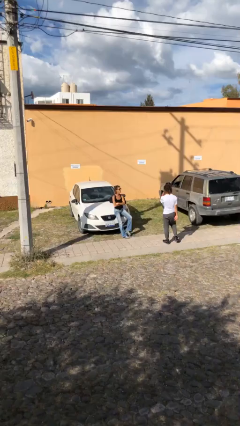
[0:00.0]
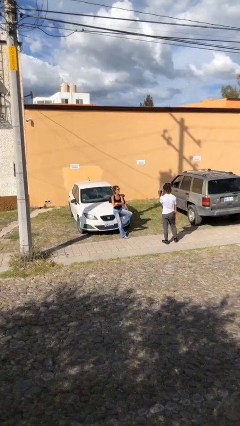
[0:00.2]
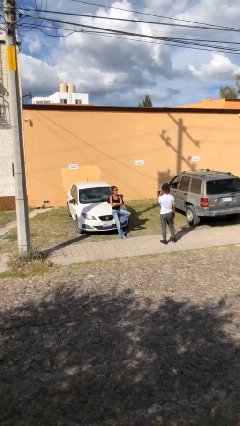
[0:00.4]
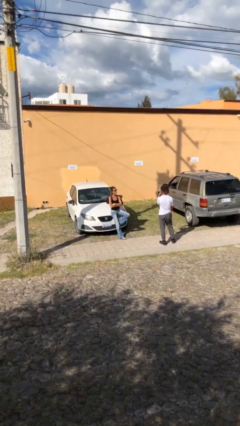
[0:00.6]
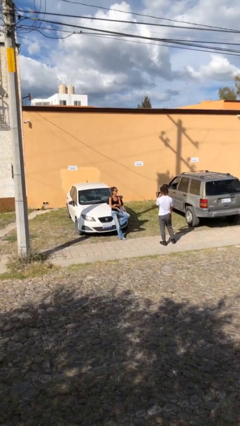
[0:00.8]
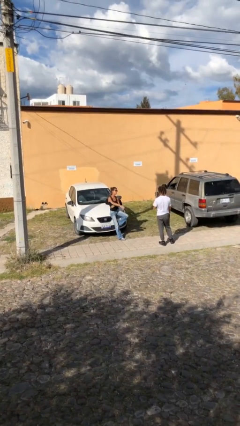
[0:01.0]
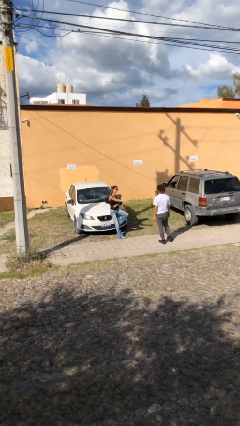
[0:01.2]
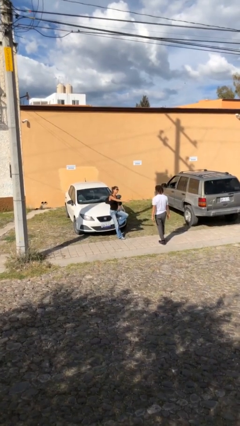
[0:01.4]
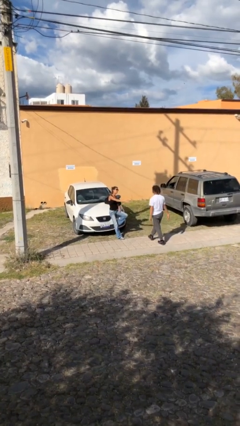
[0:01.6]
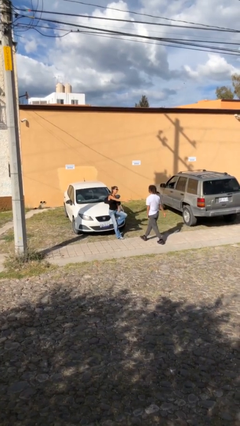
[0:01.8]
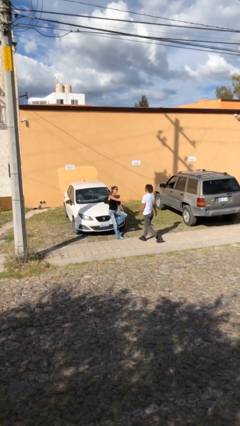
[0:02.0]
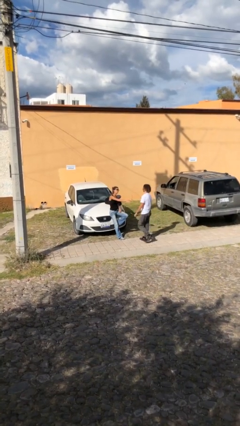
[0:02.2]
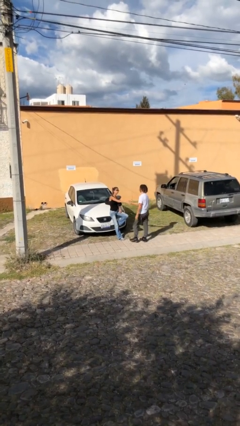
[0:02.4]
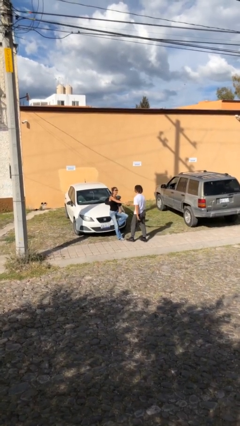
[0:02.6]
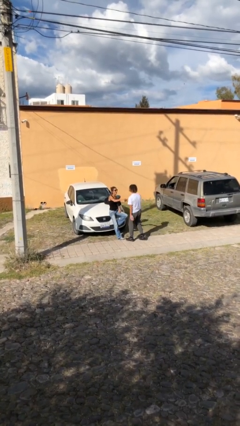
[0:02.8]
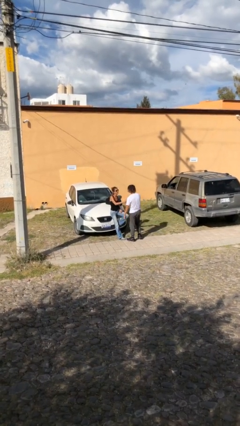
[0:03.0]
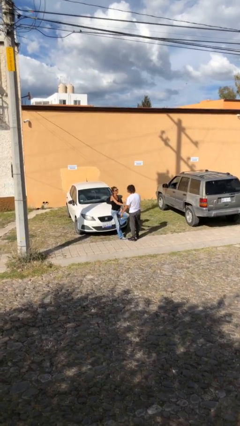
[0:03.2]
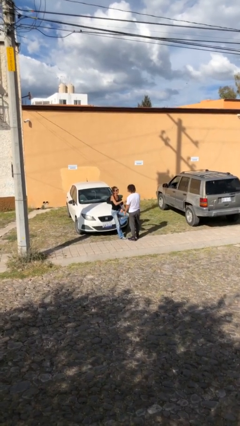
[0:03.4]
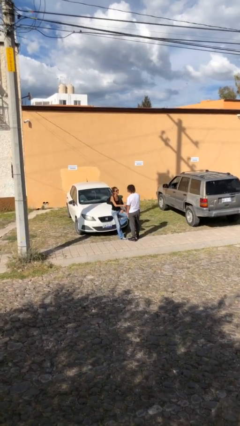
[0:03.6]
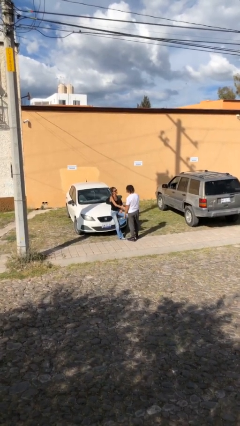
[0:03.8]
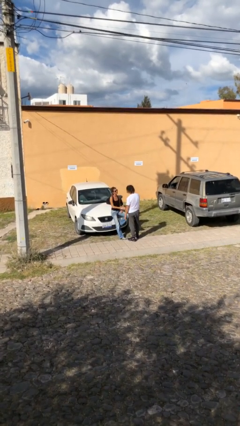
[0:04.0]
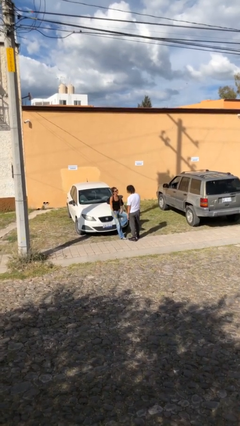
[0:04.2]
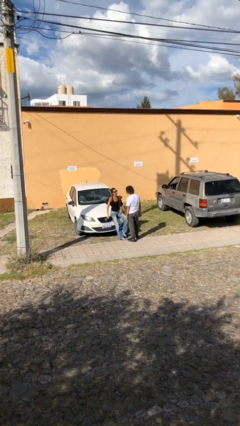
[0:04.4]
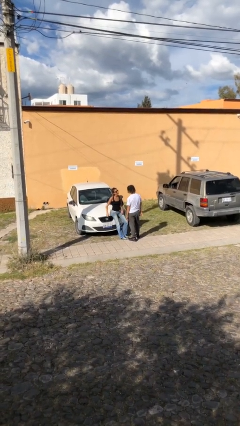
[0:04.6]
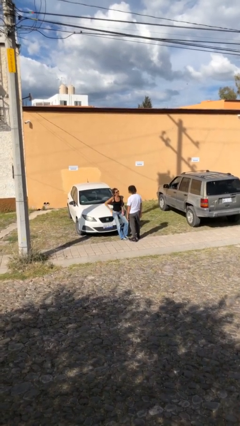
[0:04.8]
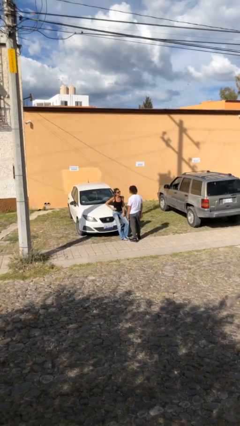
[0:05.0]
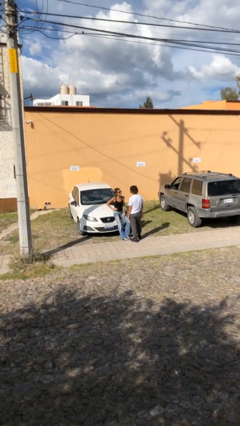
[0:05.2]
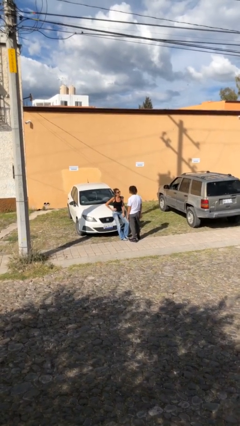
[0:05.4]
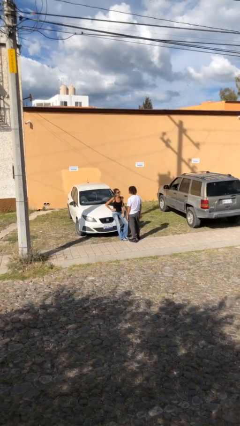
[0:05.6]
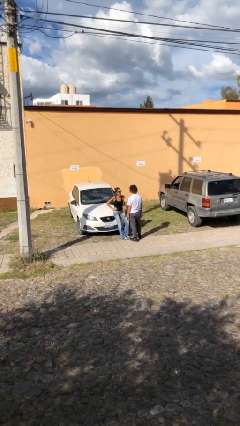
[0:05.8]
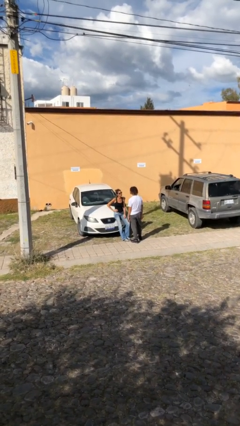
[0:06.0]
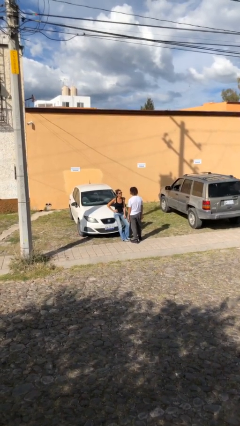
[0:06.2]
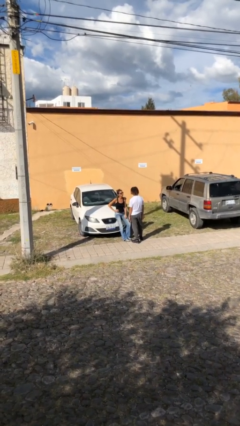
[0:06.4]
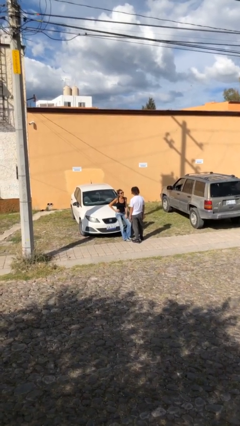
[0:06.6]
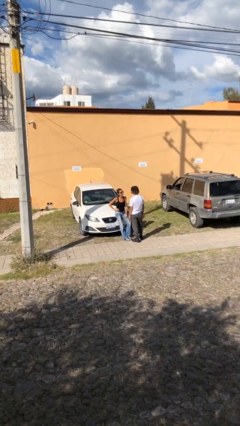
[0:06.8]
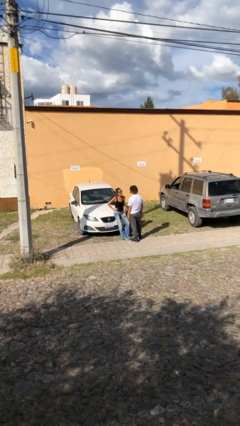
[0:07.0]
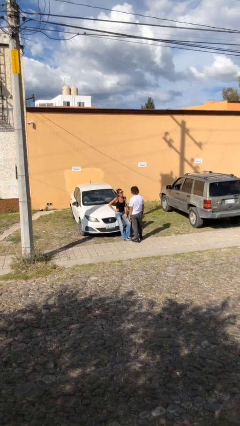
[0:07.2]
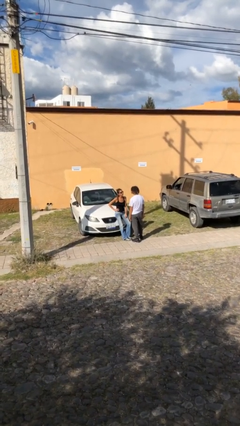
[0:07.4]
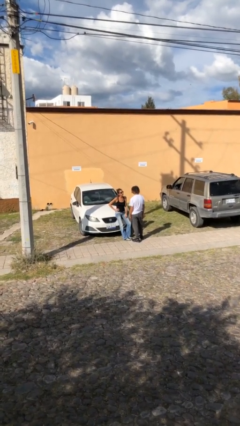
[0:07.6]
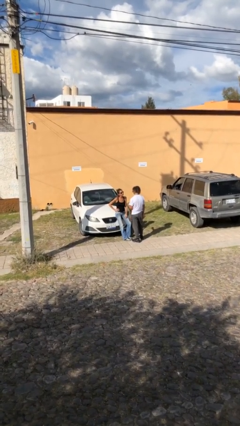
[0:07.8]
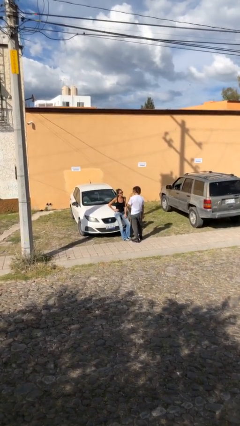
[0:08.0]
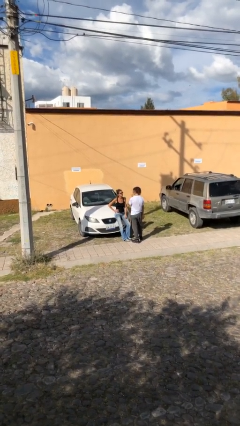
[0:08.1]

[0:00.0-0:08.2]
person shakes hand

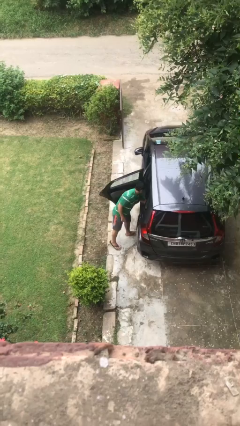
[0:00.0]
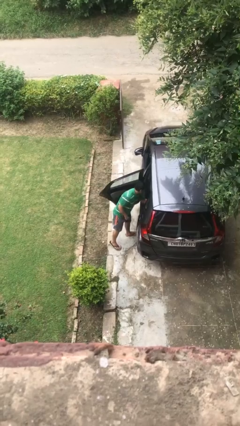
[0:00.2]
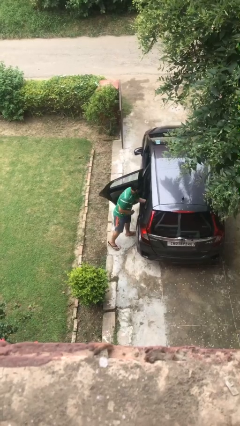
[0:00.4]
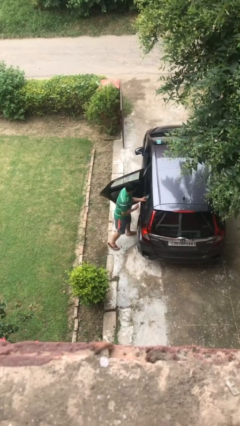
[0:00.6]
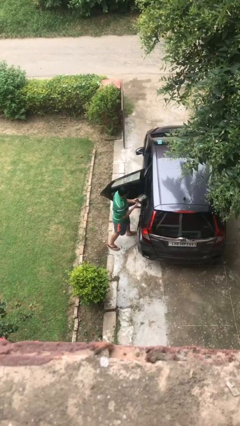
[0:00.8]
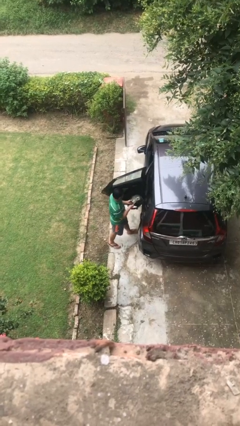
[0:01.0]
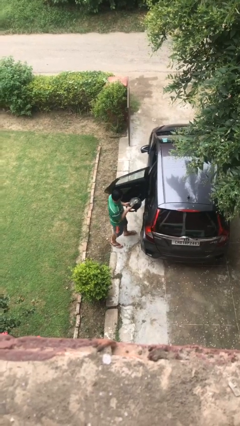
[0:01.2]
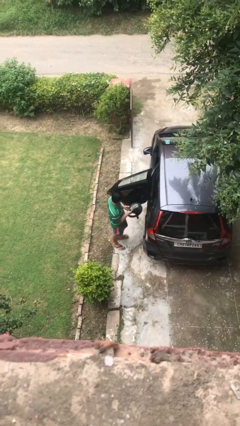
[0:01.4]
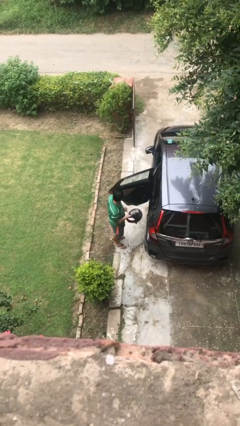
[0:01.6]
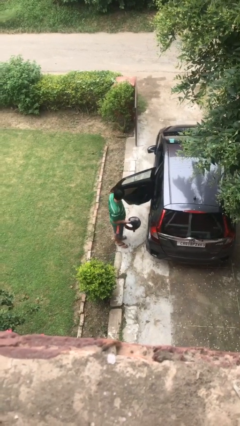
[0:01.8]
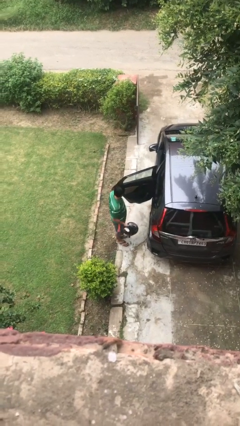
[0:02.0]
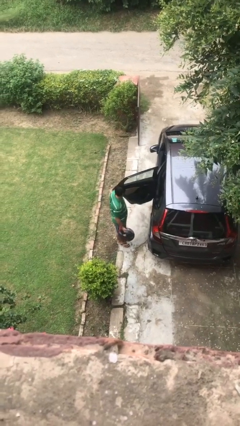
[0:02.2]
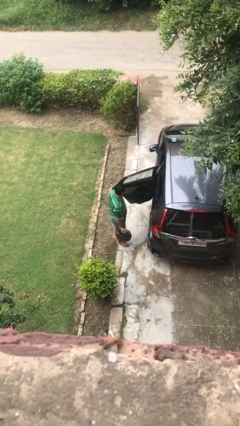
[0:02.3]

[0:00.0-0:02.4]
person unloads car

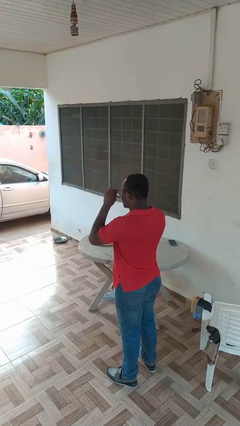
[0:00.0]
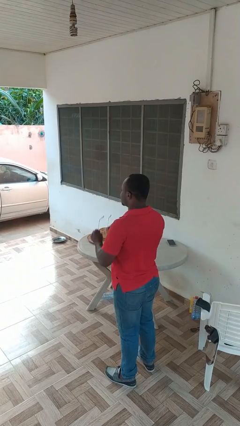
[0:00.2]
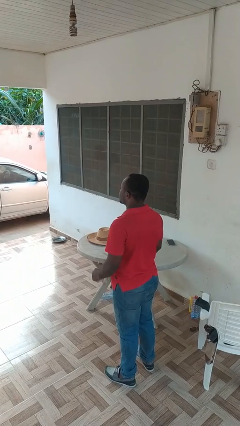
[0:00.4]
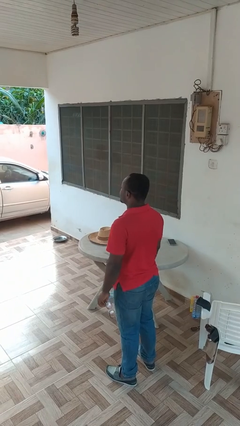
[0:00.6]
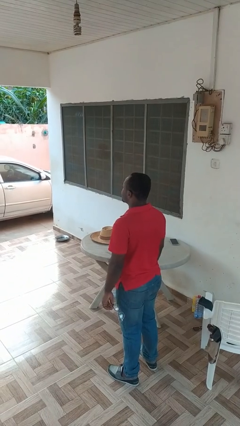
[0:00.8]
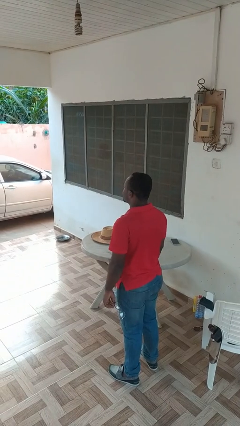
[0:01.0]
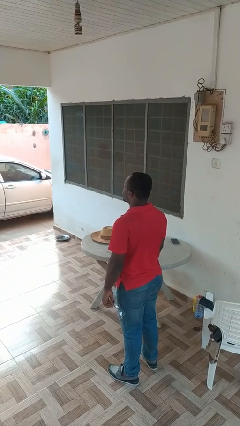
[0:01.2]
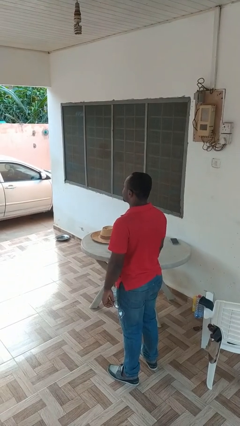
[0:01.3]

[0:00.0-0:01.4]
person takes off glasses

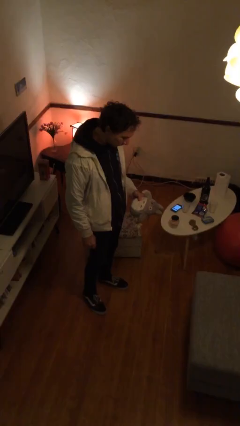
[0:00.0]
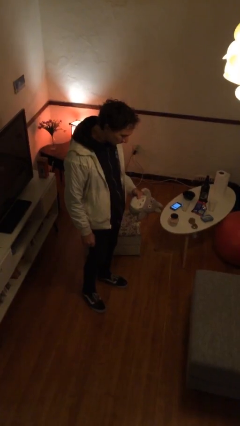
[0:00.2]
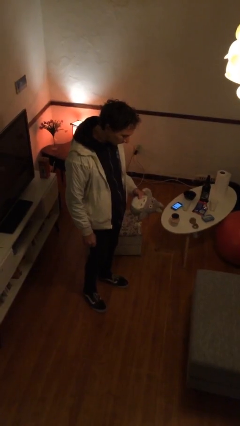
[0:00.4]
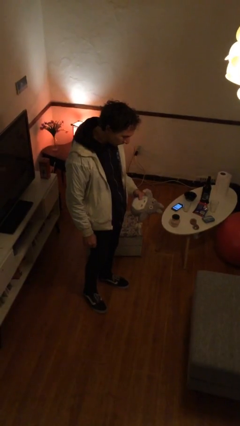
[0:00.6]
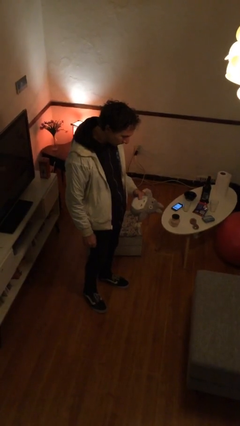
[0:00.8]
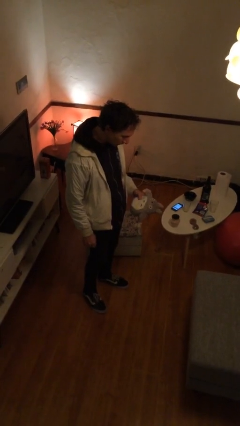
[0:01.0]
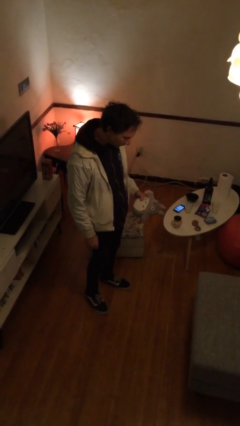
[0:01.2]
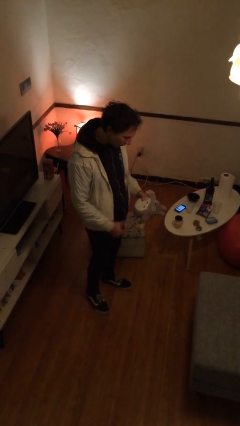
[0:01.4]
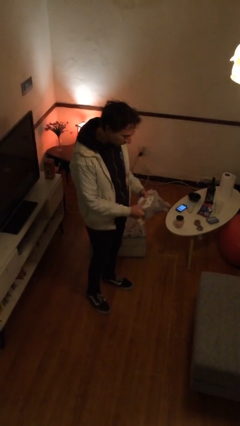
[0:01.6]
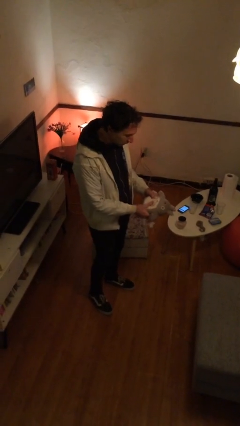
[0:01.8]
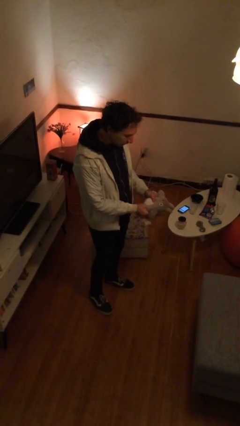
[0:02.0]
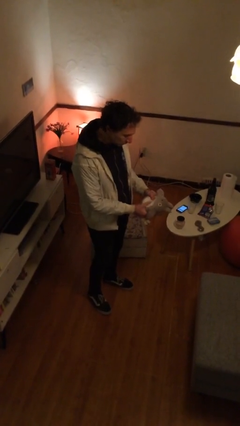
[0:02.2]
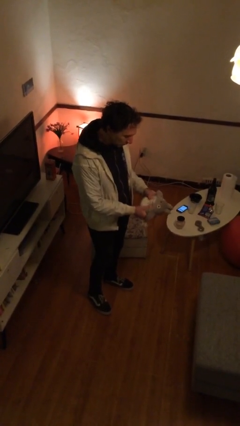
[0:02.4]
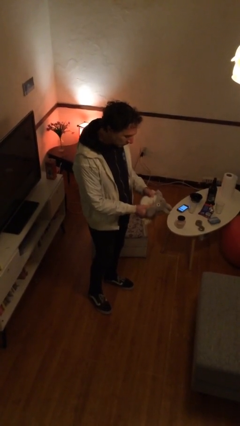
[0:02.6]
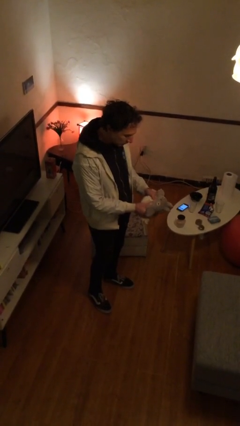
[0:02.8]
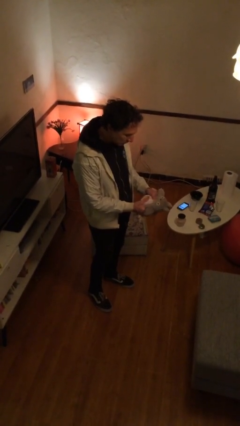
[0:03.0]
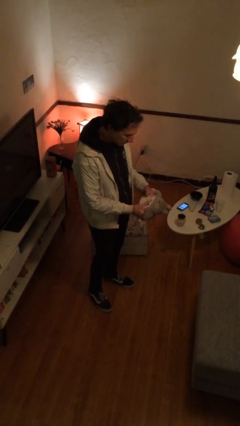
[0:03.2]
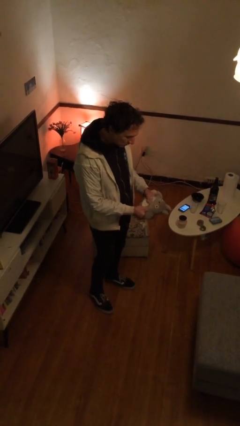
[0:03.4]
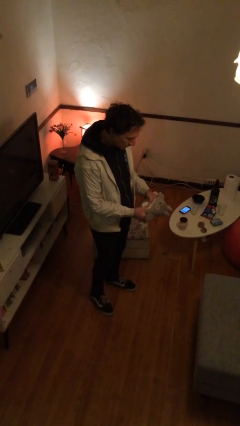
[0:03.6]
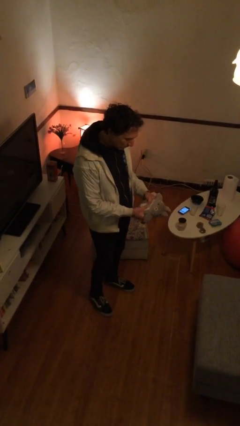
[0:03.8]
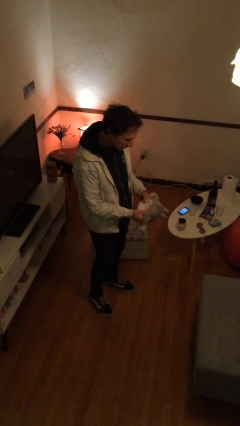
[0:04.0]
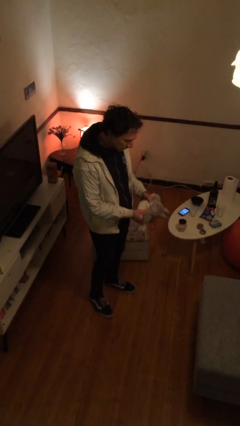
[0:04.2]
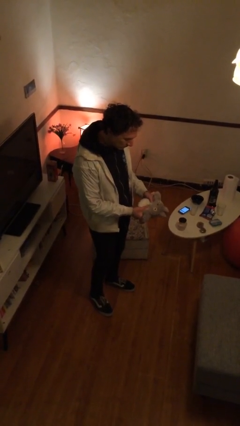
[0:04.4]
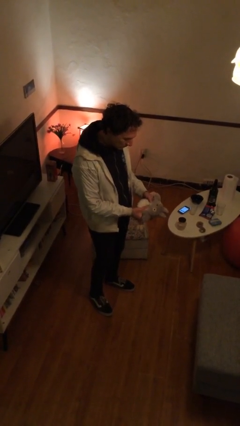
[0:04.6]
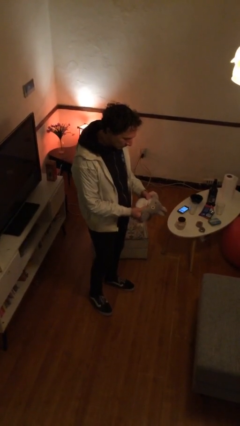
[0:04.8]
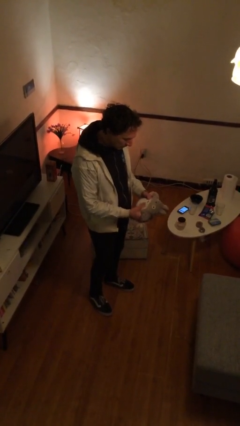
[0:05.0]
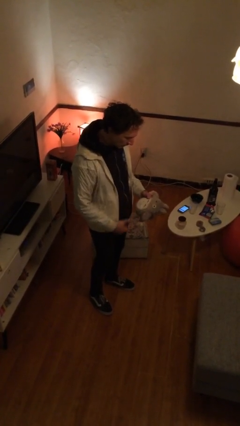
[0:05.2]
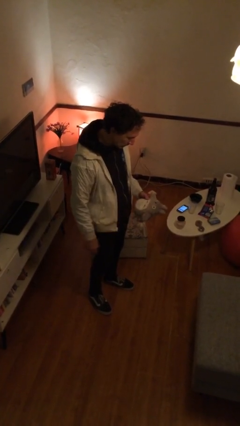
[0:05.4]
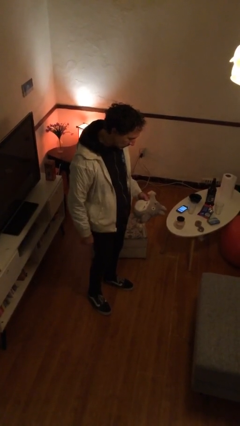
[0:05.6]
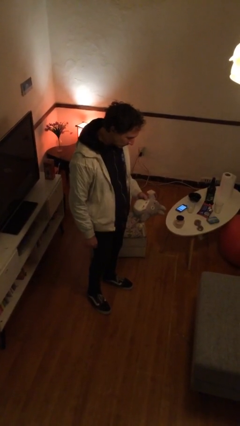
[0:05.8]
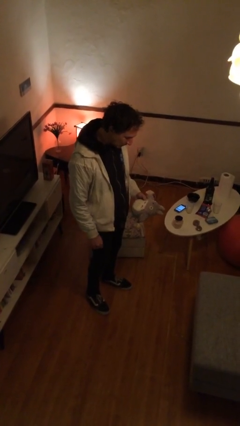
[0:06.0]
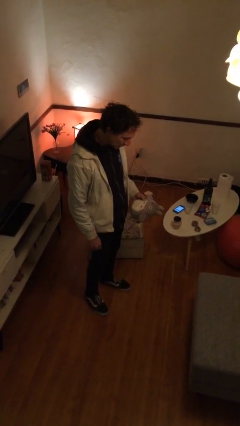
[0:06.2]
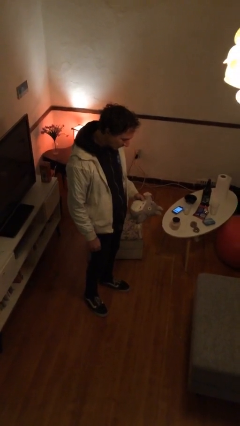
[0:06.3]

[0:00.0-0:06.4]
person squeezes object
